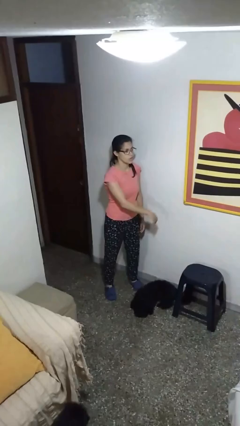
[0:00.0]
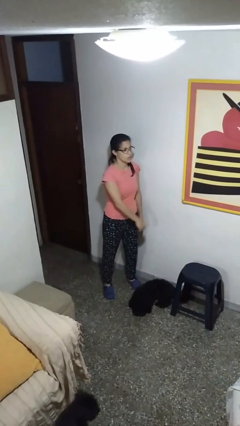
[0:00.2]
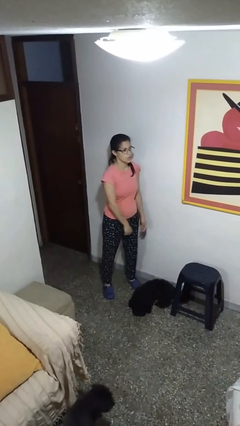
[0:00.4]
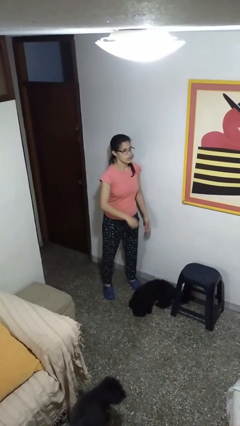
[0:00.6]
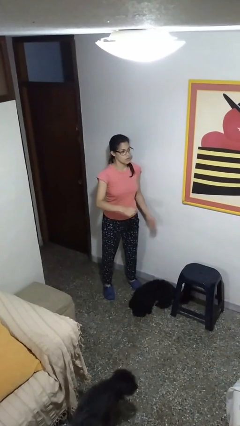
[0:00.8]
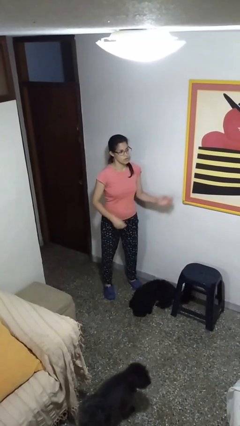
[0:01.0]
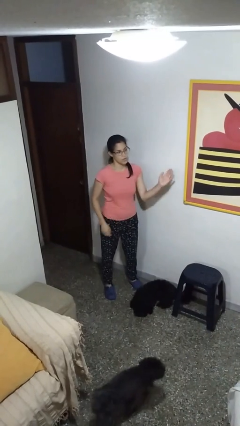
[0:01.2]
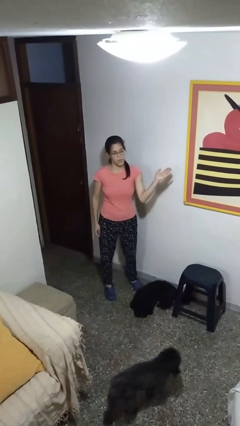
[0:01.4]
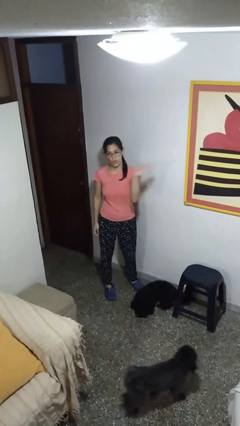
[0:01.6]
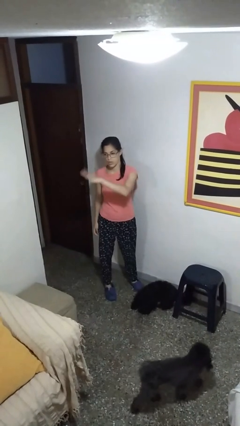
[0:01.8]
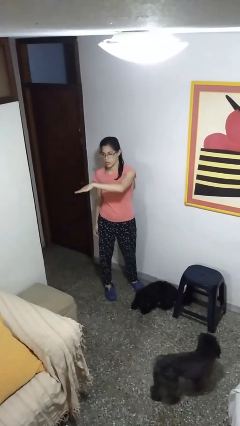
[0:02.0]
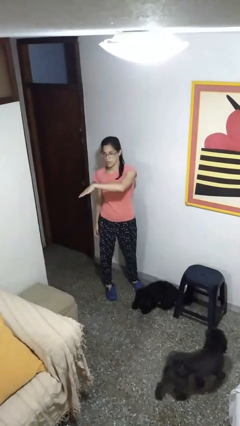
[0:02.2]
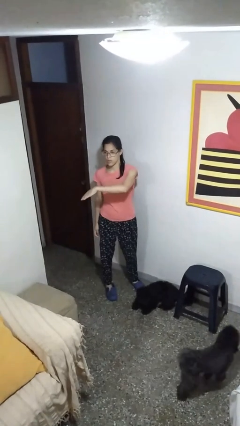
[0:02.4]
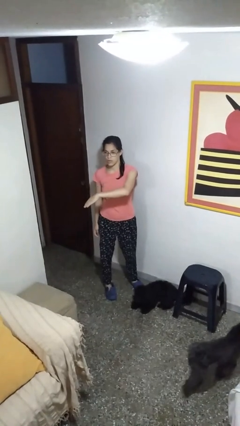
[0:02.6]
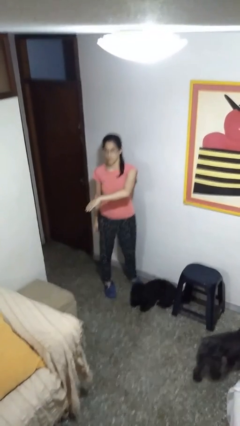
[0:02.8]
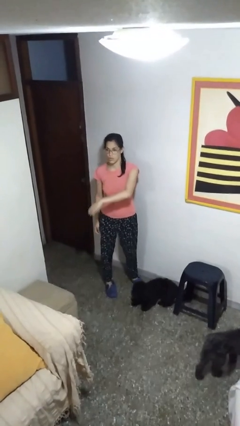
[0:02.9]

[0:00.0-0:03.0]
person gestures swipe right

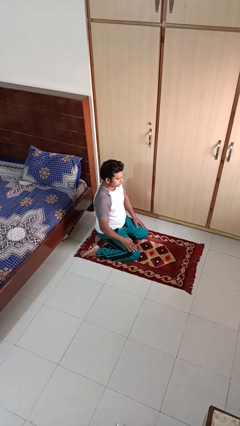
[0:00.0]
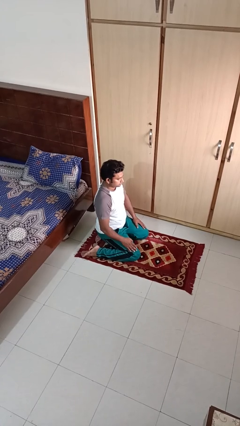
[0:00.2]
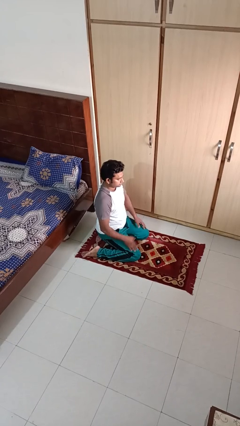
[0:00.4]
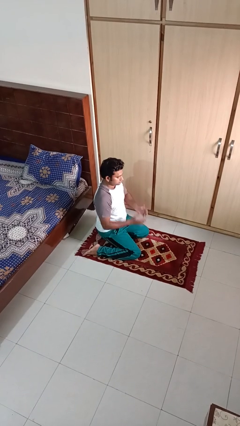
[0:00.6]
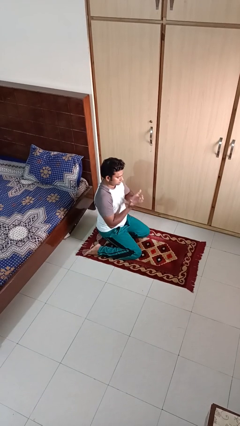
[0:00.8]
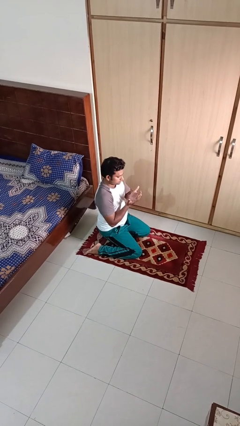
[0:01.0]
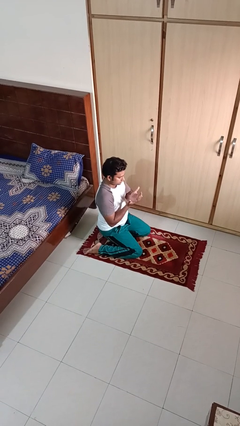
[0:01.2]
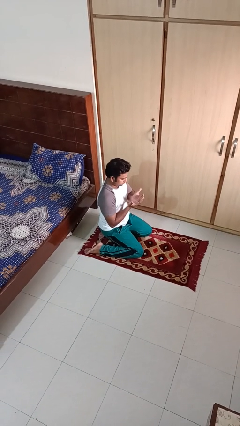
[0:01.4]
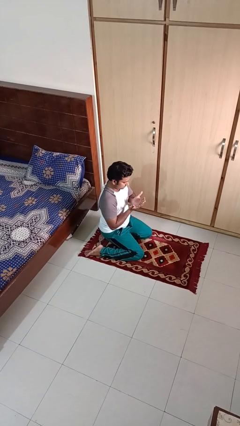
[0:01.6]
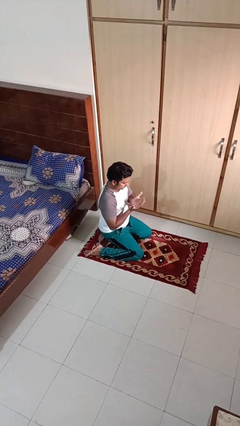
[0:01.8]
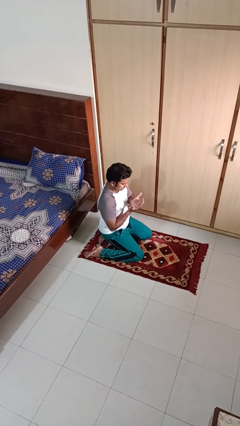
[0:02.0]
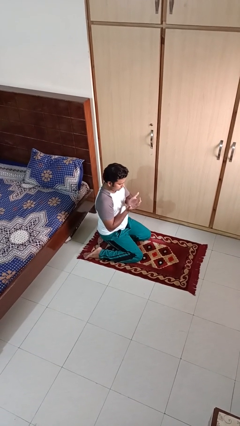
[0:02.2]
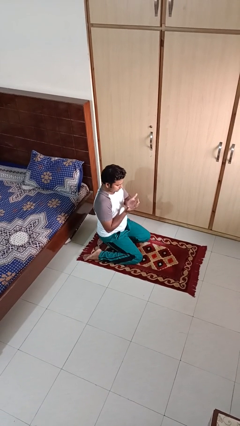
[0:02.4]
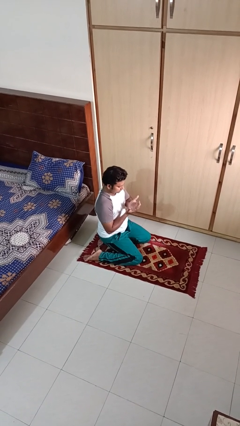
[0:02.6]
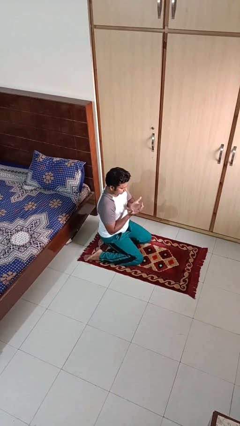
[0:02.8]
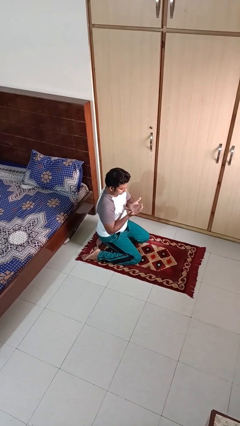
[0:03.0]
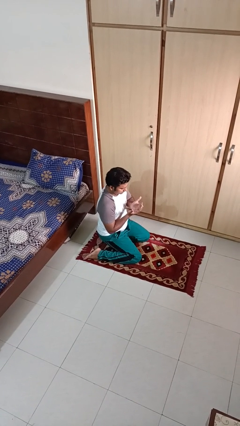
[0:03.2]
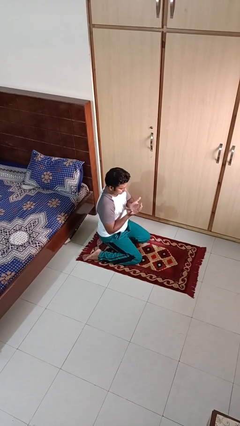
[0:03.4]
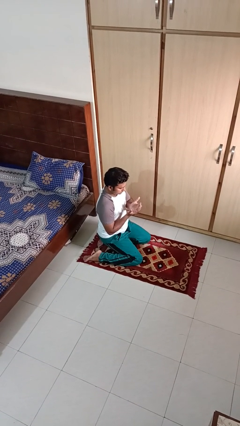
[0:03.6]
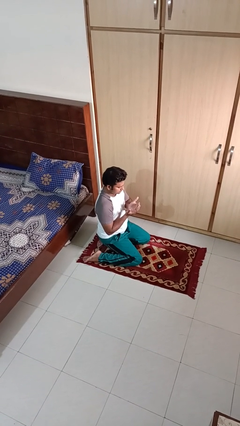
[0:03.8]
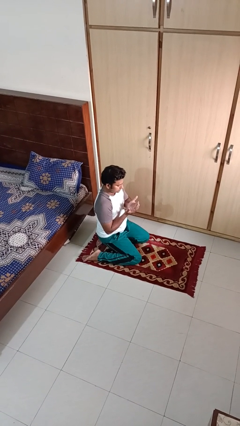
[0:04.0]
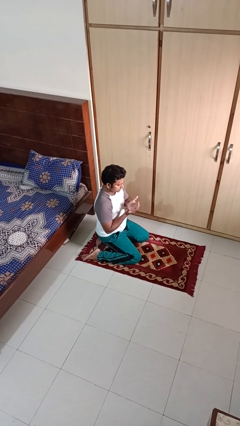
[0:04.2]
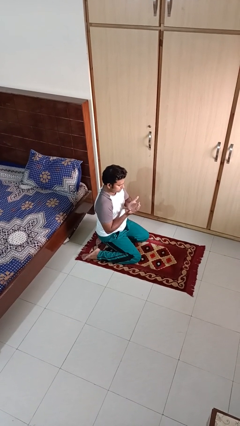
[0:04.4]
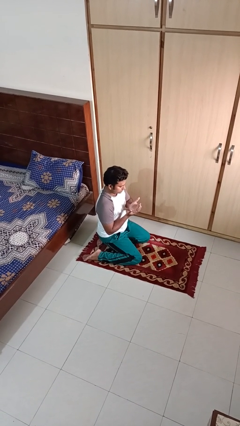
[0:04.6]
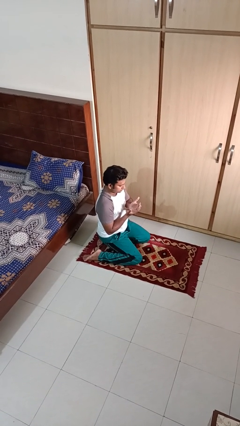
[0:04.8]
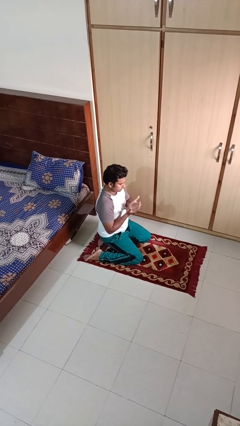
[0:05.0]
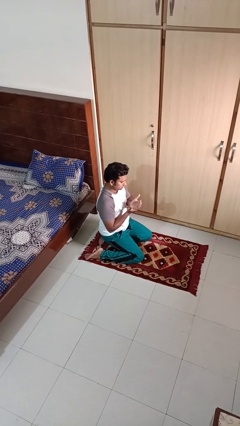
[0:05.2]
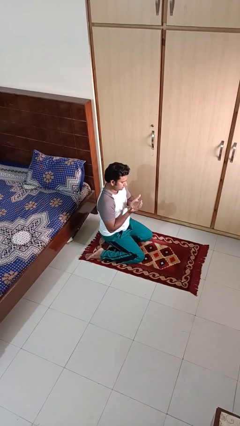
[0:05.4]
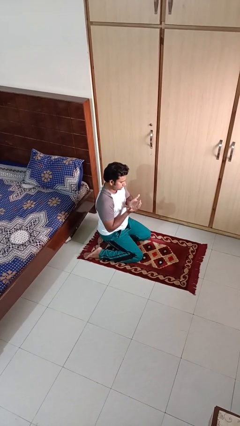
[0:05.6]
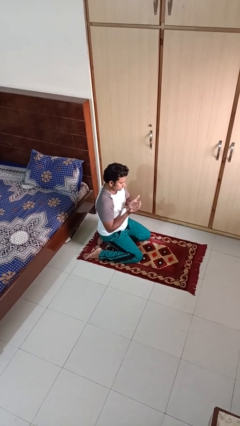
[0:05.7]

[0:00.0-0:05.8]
person prays

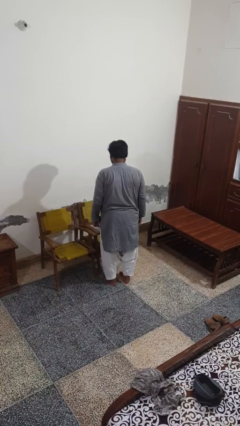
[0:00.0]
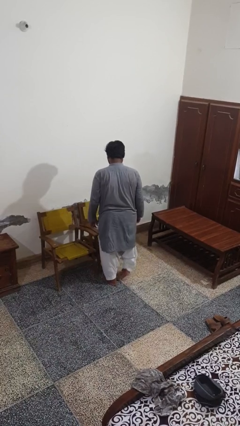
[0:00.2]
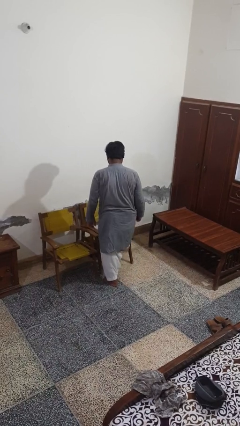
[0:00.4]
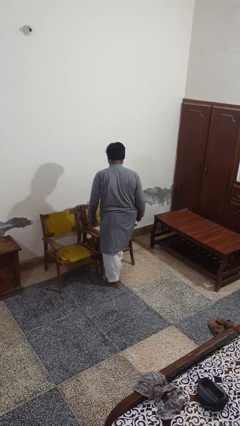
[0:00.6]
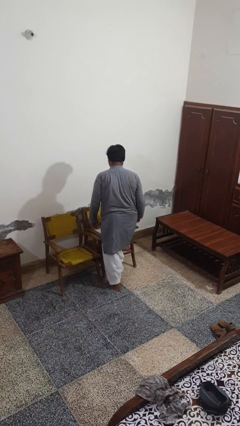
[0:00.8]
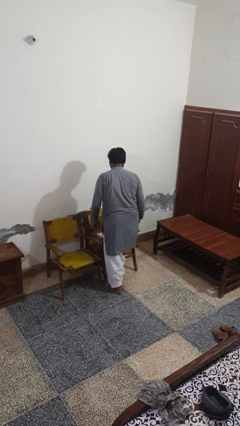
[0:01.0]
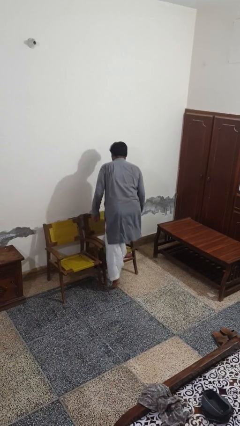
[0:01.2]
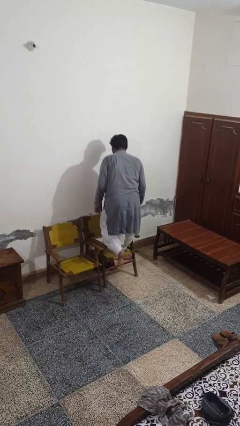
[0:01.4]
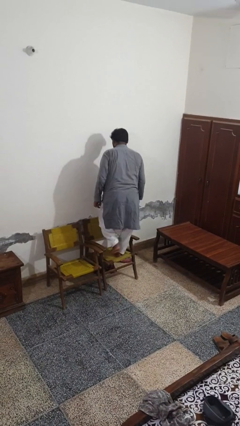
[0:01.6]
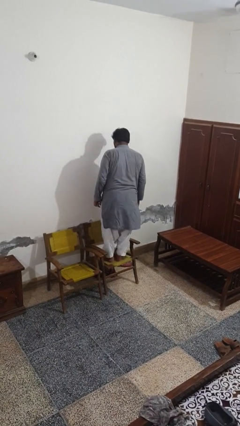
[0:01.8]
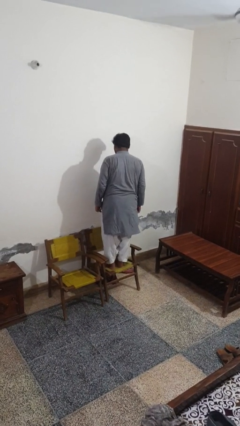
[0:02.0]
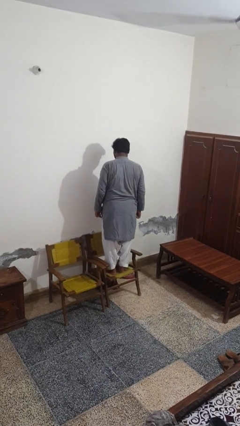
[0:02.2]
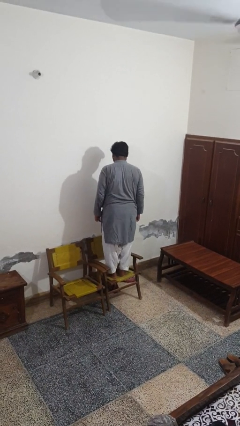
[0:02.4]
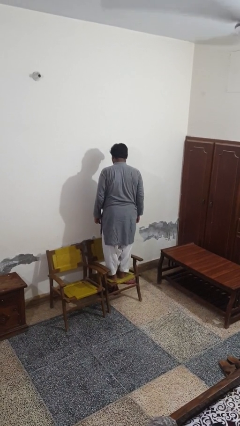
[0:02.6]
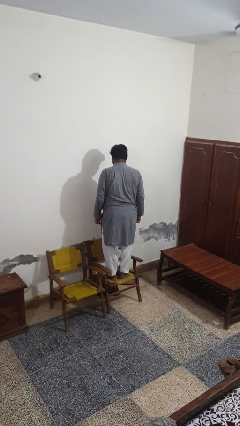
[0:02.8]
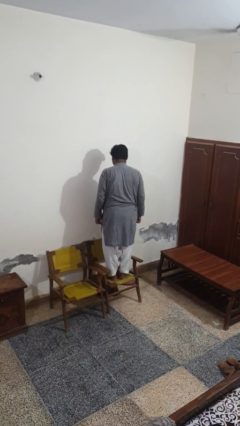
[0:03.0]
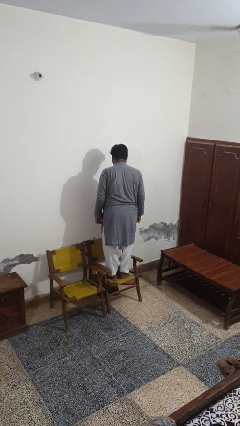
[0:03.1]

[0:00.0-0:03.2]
person climbs on chair

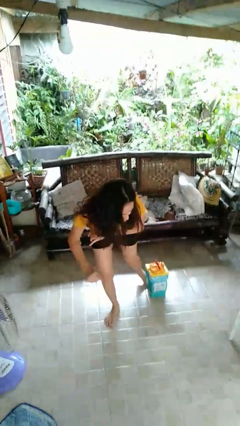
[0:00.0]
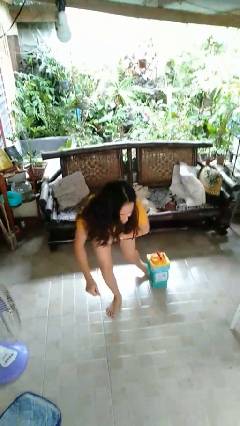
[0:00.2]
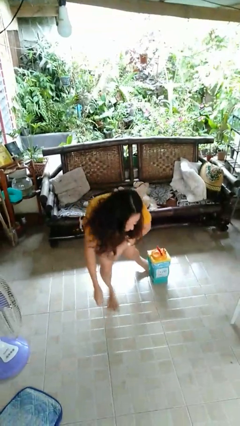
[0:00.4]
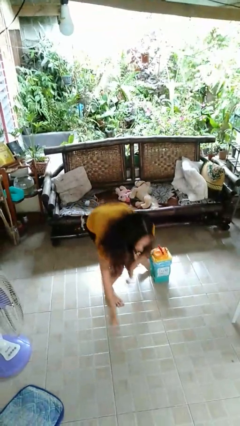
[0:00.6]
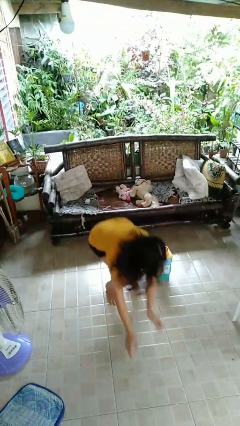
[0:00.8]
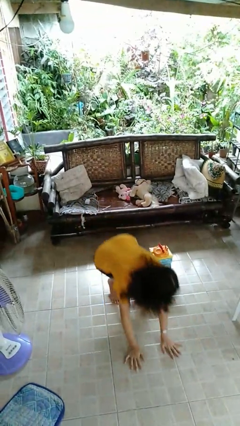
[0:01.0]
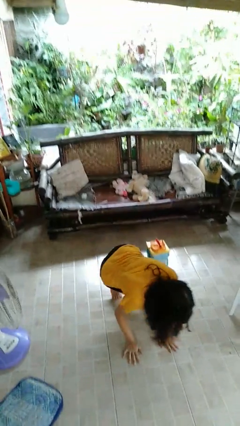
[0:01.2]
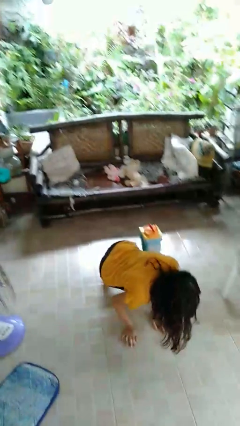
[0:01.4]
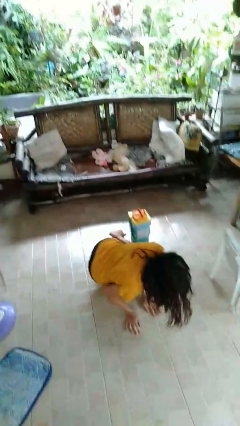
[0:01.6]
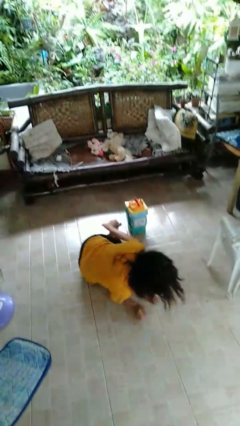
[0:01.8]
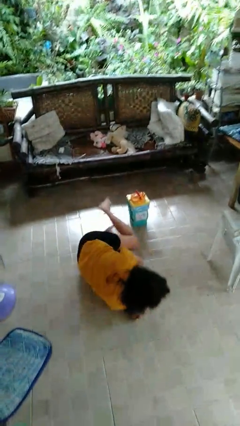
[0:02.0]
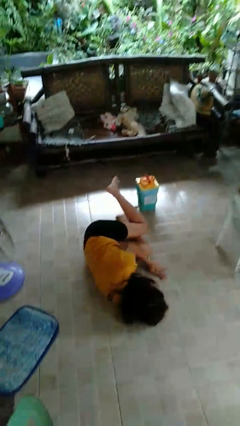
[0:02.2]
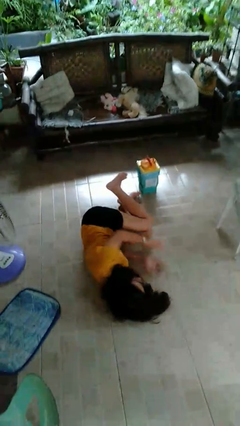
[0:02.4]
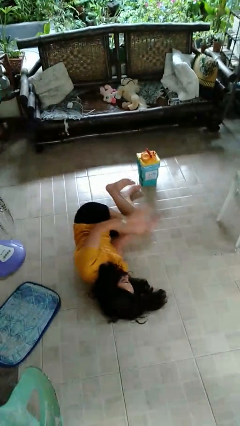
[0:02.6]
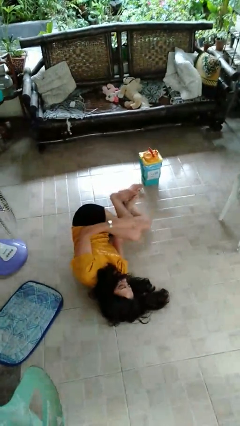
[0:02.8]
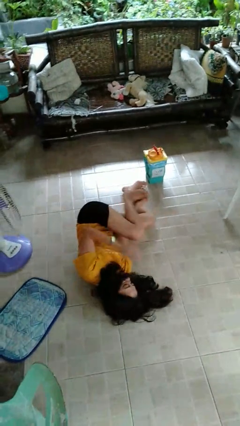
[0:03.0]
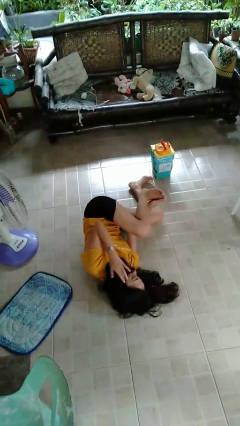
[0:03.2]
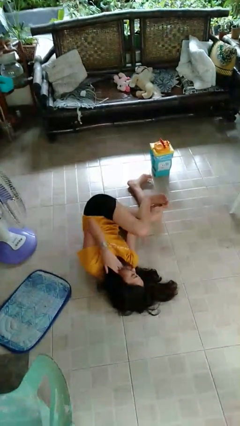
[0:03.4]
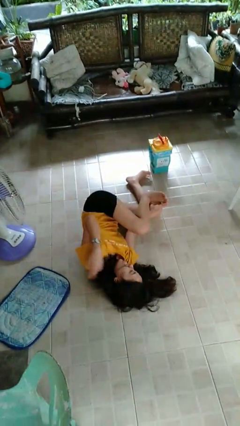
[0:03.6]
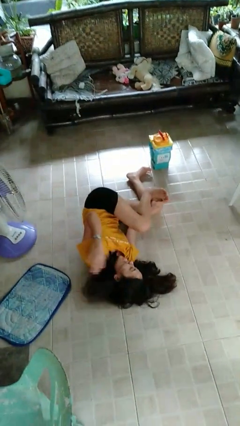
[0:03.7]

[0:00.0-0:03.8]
person lies down on floor

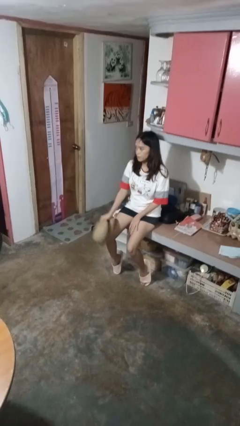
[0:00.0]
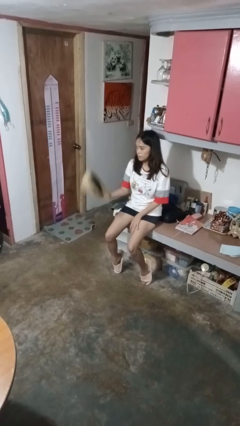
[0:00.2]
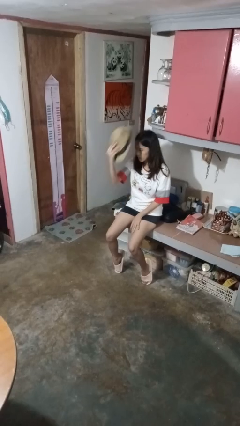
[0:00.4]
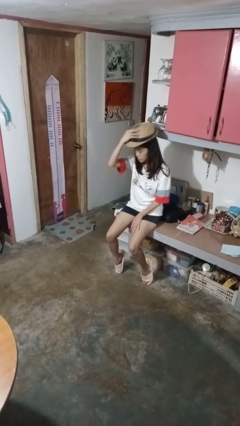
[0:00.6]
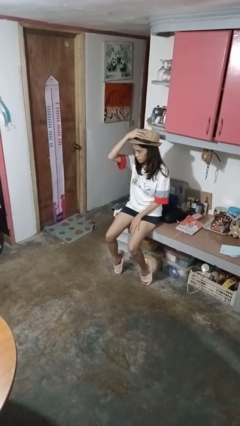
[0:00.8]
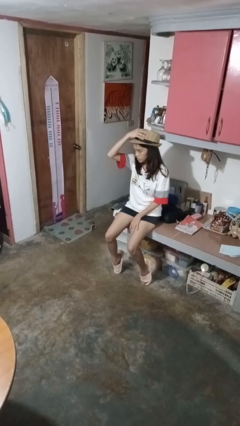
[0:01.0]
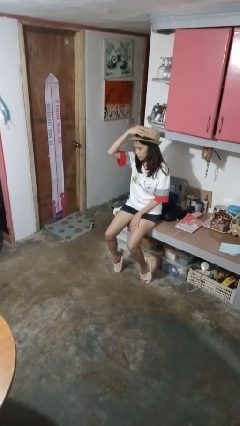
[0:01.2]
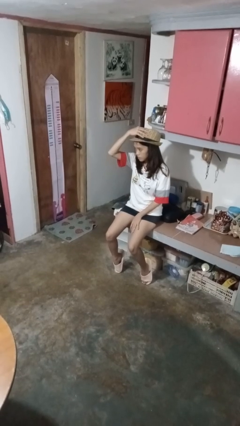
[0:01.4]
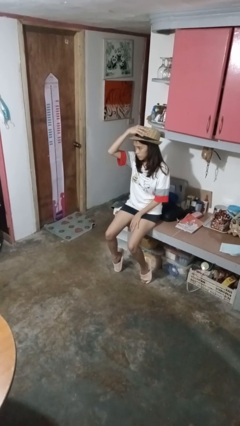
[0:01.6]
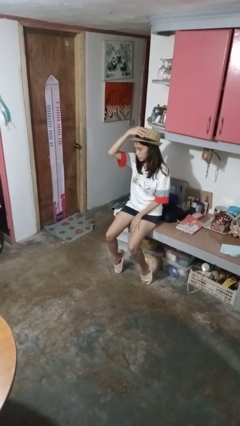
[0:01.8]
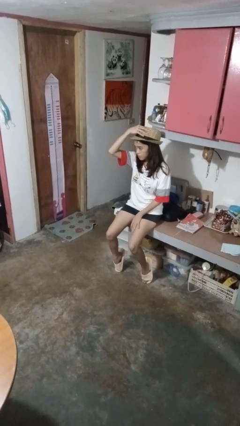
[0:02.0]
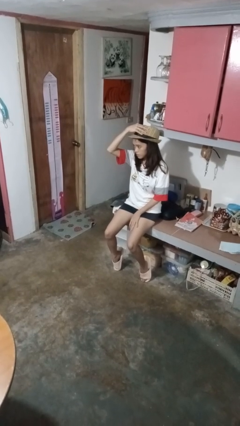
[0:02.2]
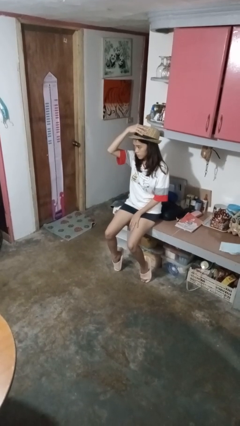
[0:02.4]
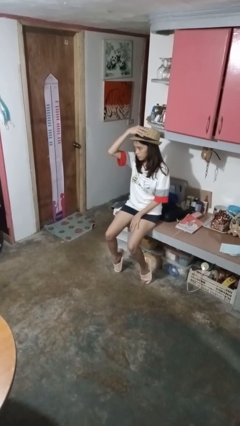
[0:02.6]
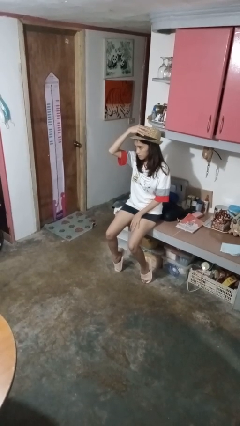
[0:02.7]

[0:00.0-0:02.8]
person puts on hat
